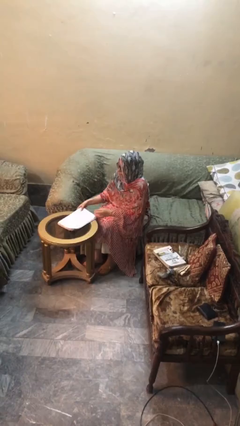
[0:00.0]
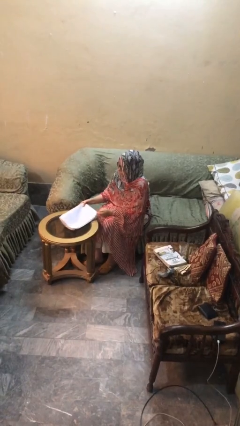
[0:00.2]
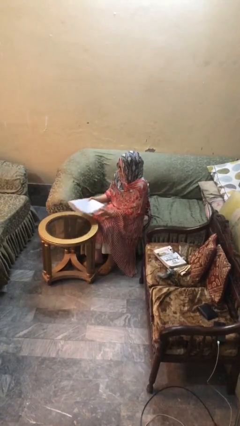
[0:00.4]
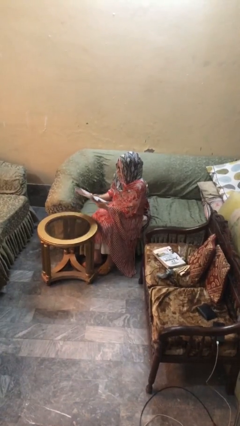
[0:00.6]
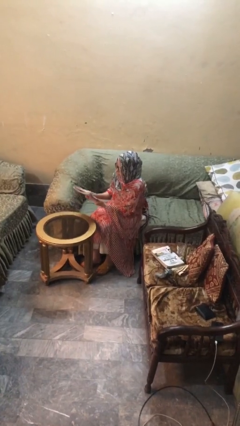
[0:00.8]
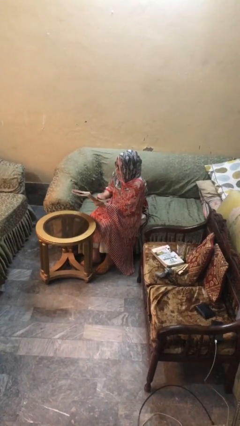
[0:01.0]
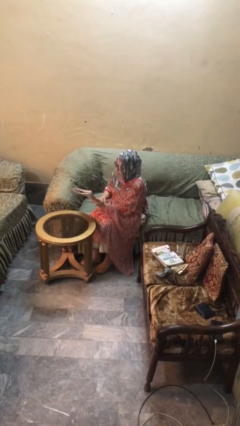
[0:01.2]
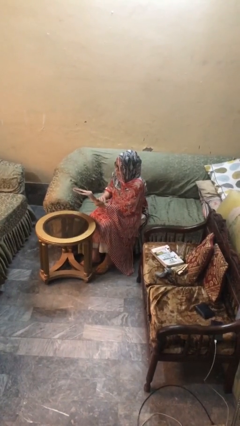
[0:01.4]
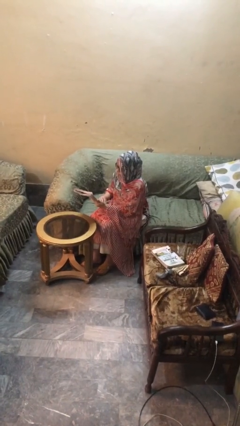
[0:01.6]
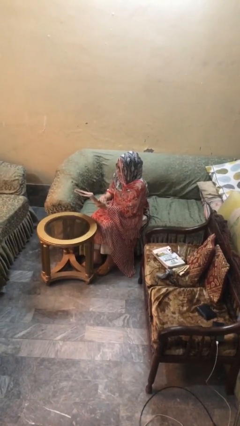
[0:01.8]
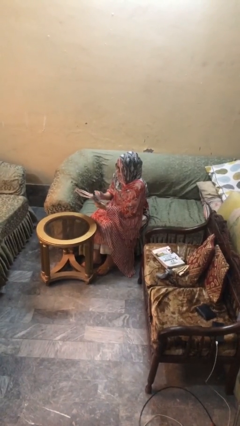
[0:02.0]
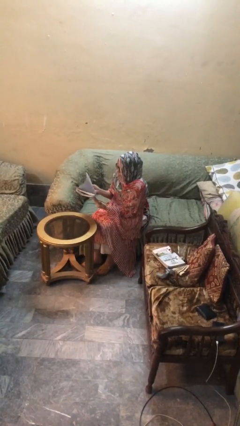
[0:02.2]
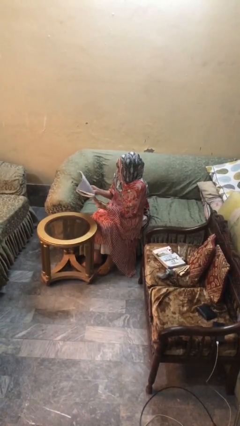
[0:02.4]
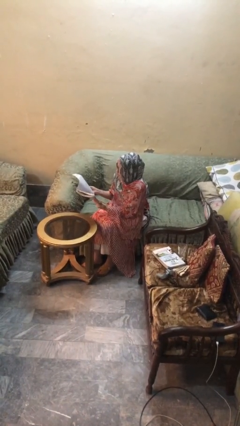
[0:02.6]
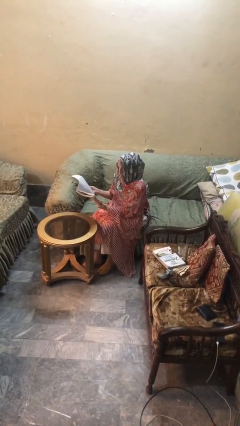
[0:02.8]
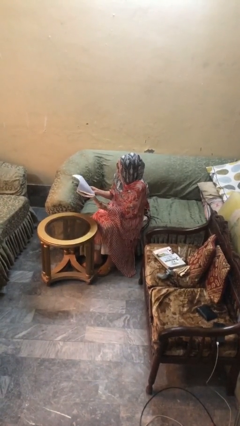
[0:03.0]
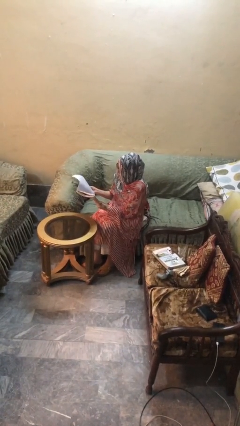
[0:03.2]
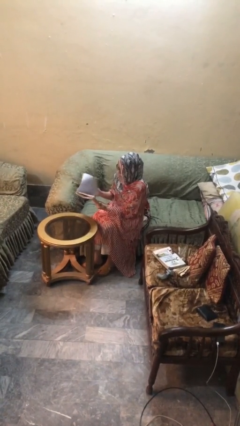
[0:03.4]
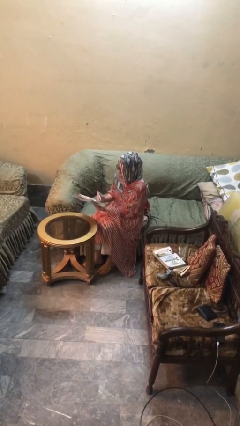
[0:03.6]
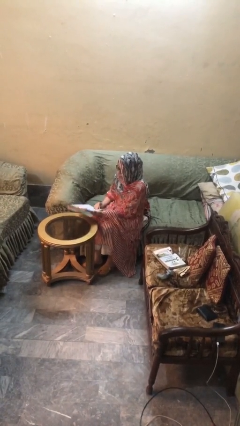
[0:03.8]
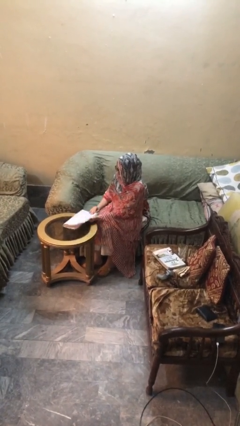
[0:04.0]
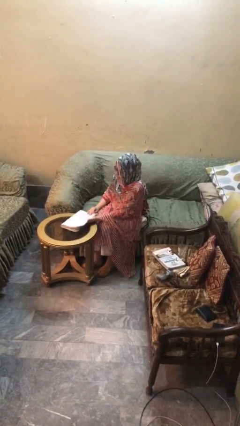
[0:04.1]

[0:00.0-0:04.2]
person reads magazine

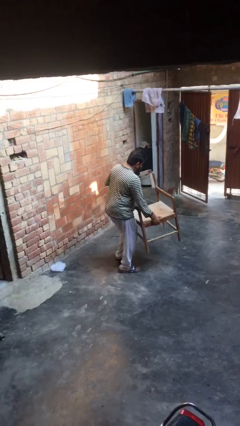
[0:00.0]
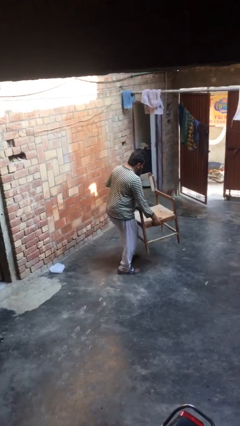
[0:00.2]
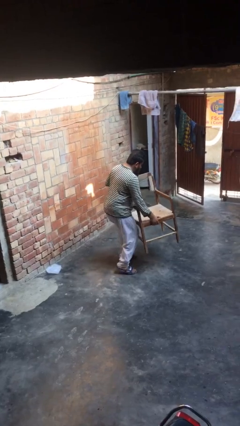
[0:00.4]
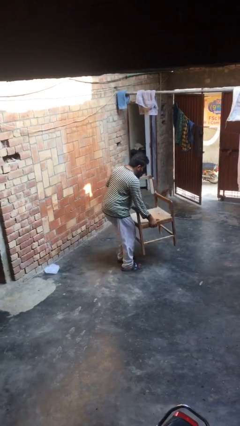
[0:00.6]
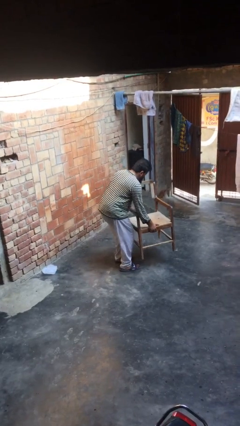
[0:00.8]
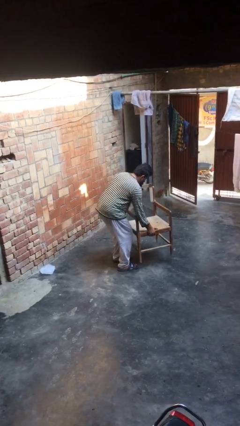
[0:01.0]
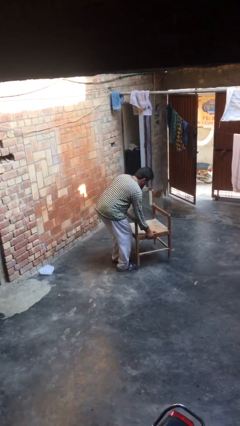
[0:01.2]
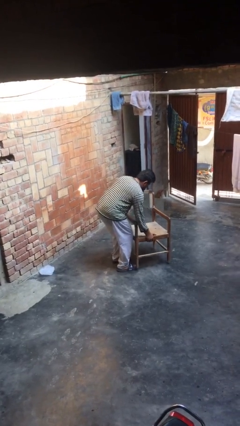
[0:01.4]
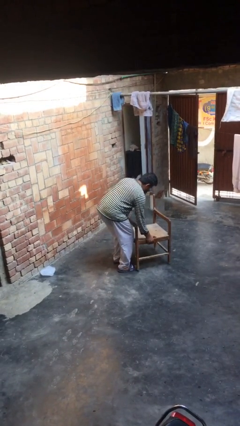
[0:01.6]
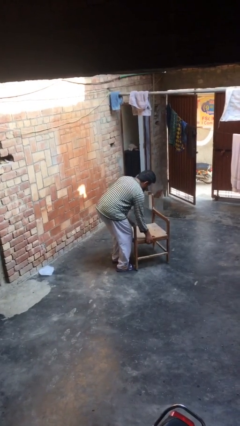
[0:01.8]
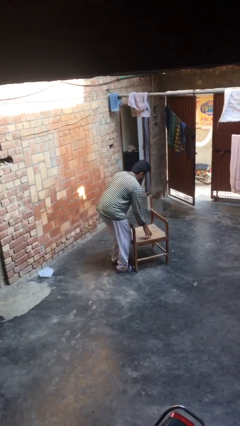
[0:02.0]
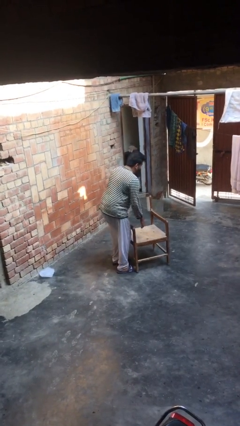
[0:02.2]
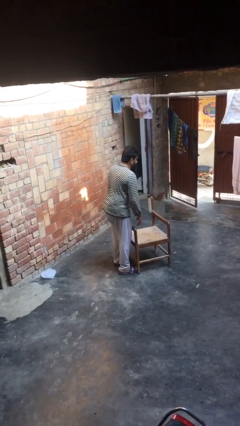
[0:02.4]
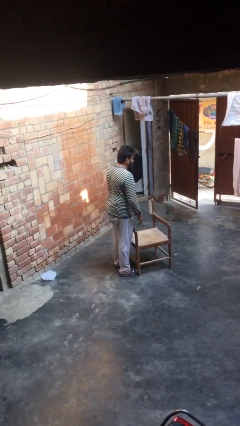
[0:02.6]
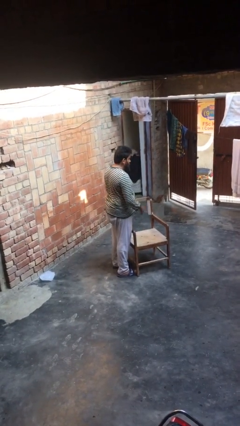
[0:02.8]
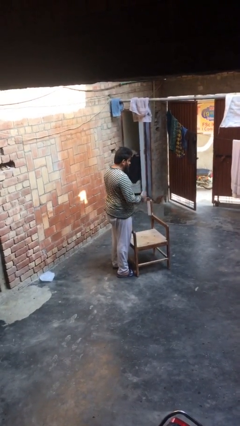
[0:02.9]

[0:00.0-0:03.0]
person puts down object on floor

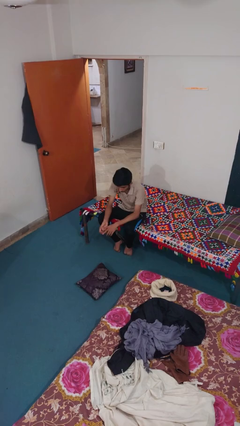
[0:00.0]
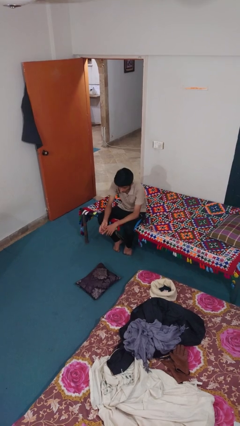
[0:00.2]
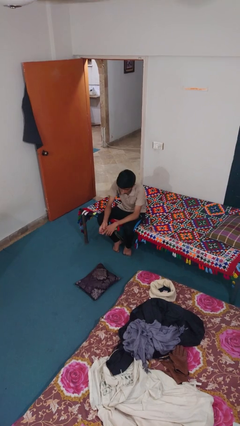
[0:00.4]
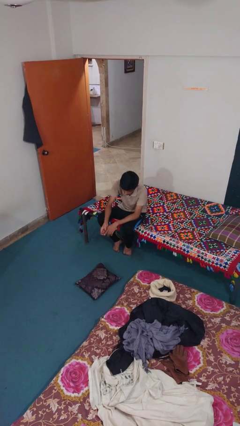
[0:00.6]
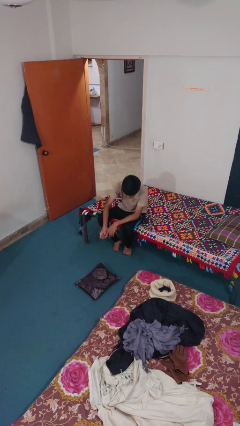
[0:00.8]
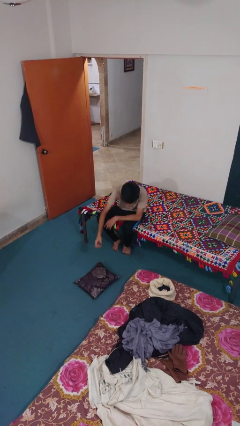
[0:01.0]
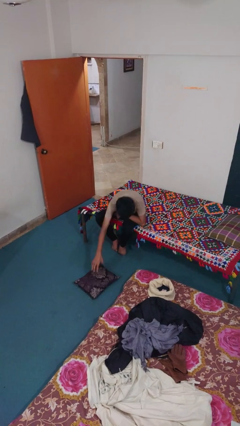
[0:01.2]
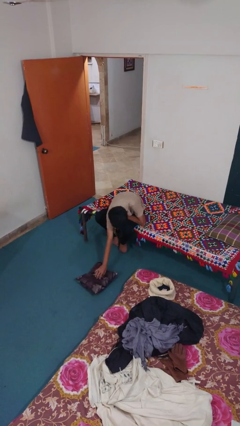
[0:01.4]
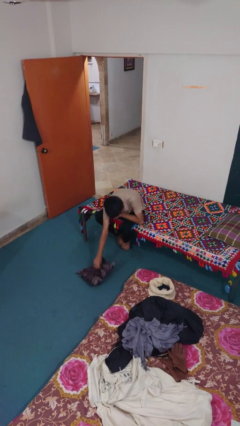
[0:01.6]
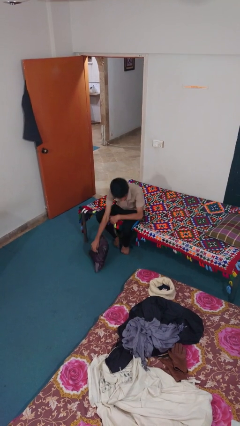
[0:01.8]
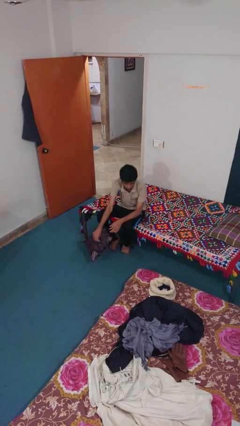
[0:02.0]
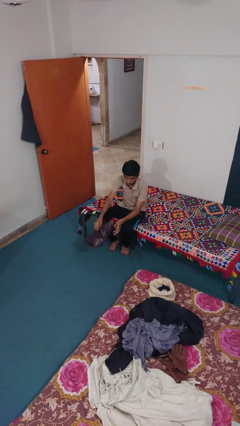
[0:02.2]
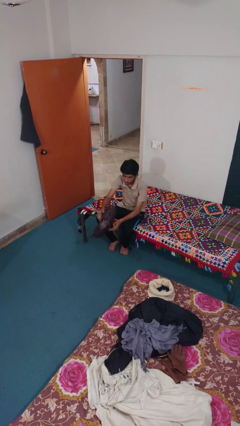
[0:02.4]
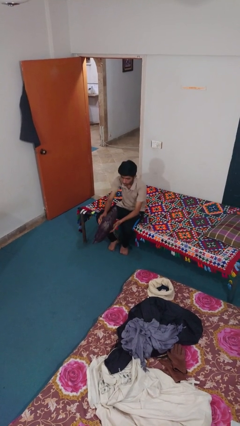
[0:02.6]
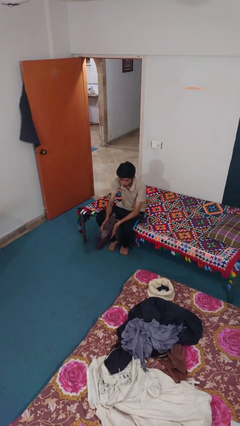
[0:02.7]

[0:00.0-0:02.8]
person picks up object from floor

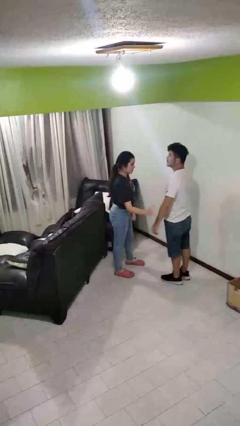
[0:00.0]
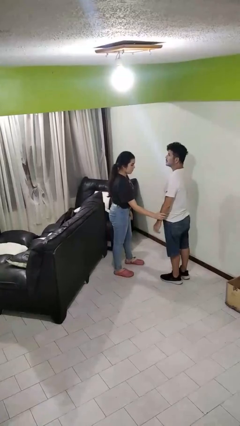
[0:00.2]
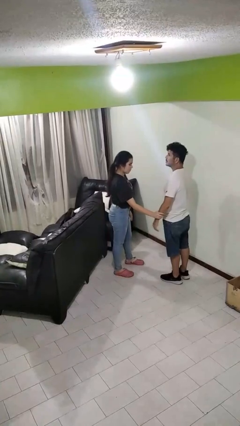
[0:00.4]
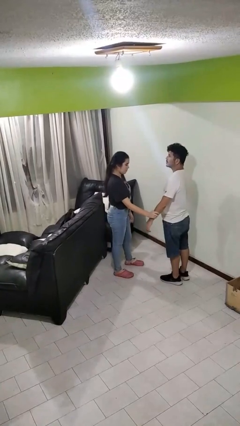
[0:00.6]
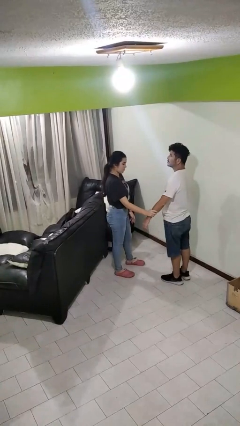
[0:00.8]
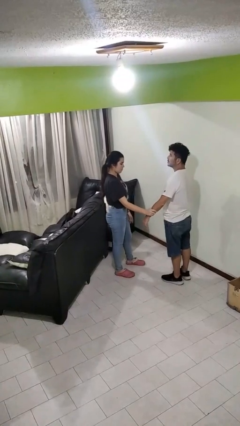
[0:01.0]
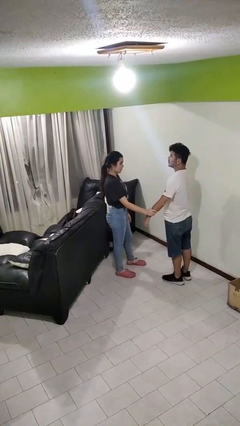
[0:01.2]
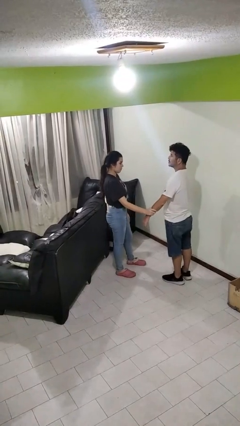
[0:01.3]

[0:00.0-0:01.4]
person grabs person by forearm

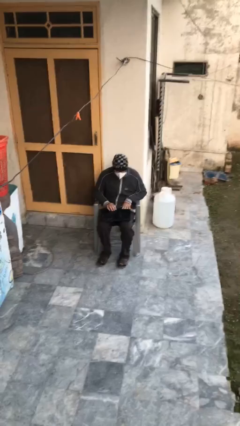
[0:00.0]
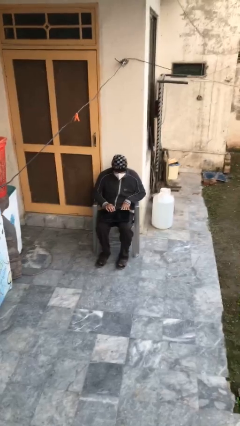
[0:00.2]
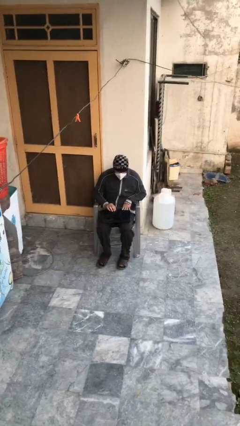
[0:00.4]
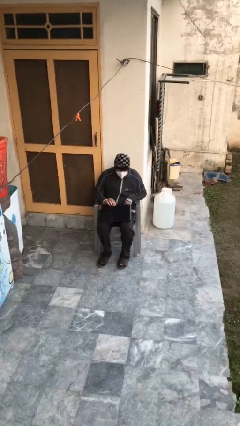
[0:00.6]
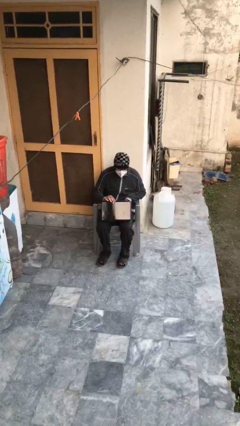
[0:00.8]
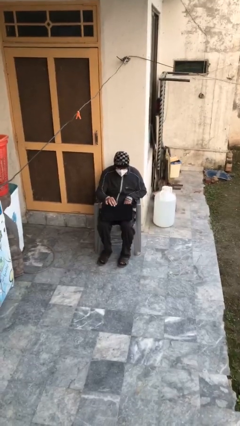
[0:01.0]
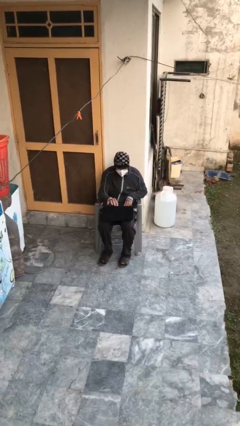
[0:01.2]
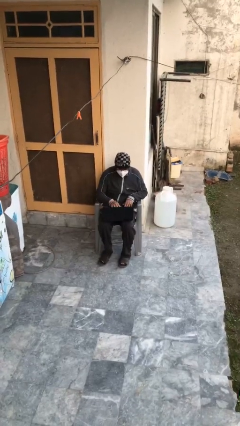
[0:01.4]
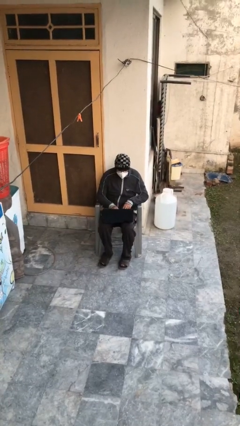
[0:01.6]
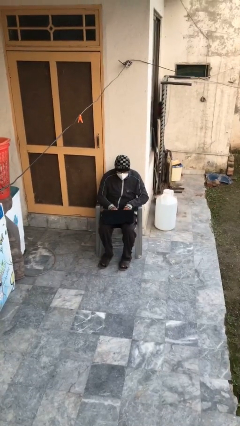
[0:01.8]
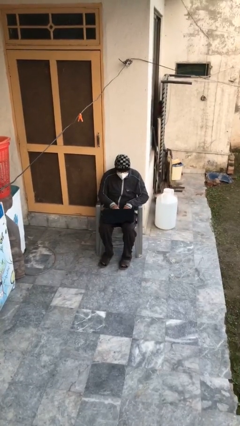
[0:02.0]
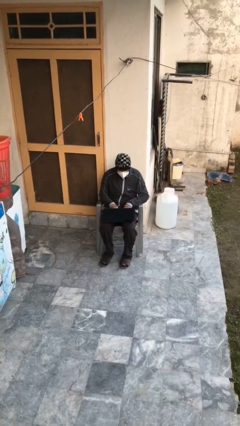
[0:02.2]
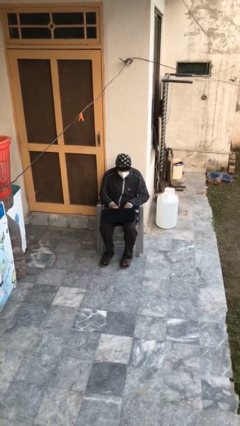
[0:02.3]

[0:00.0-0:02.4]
person interacts with laptop

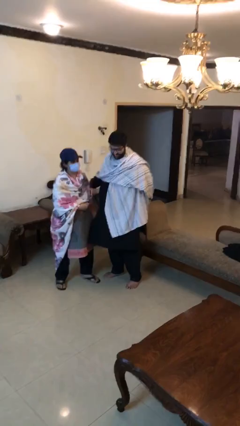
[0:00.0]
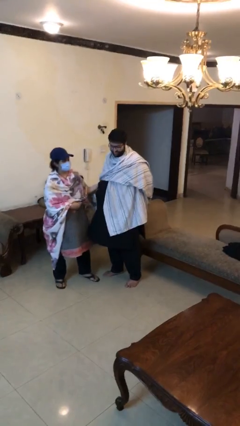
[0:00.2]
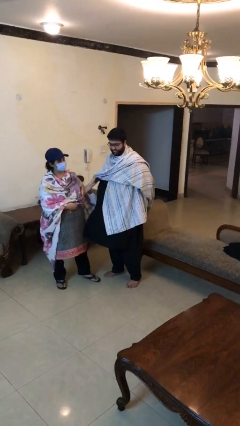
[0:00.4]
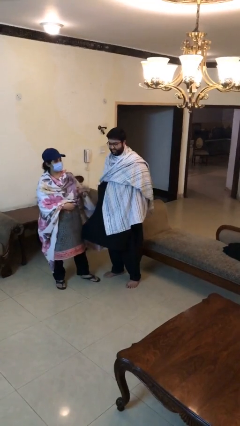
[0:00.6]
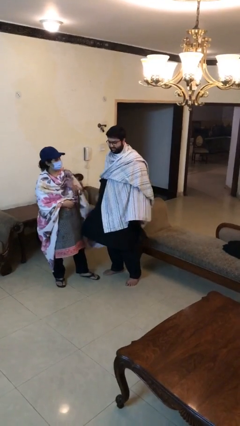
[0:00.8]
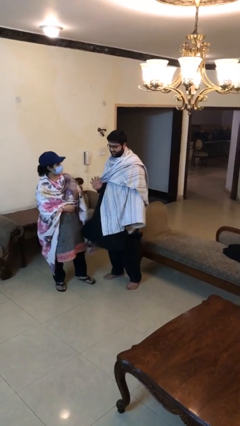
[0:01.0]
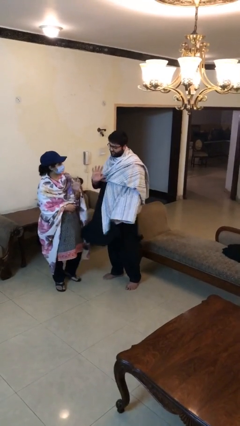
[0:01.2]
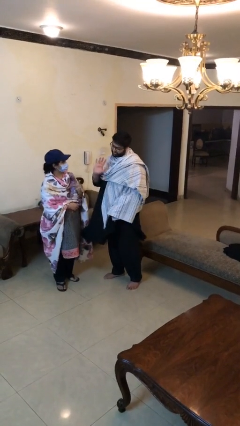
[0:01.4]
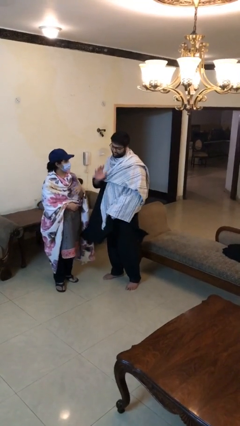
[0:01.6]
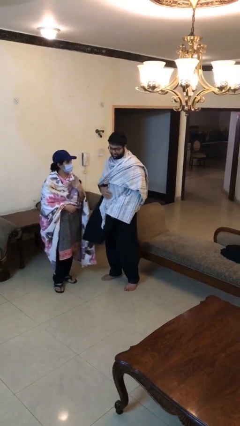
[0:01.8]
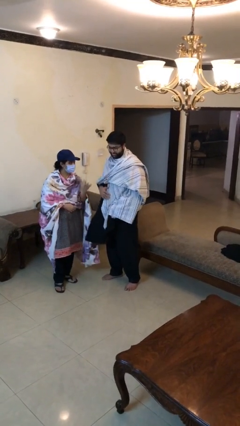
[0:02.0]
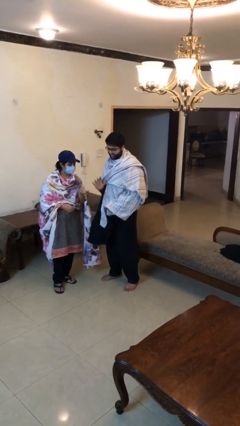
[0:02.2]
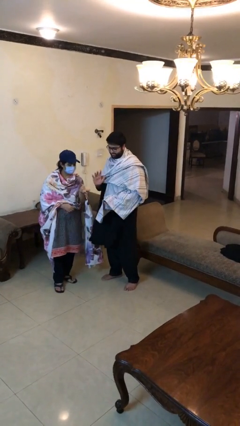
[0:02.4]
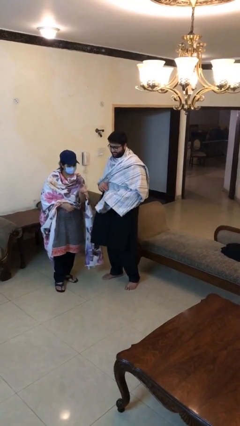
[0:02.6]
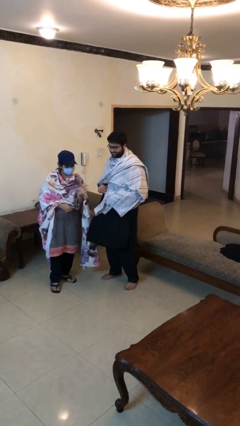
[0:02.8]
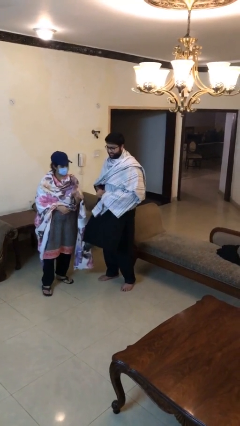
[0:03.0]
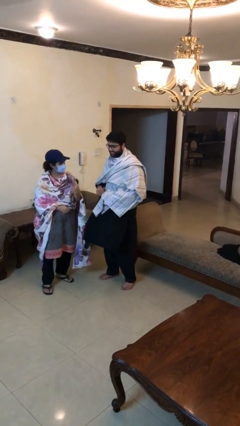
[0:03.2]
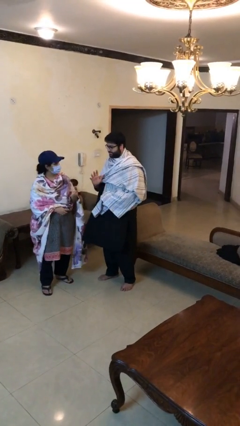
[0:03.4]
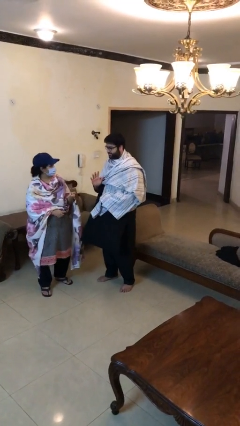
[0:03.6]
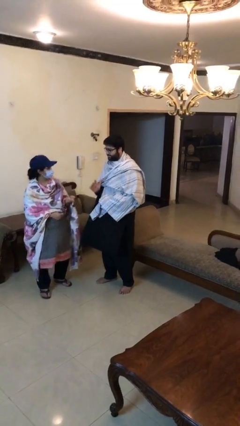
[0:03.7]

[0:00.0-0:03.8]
person talks to person
